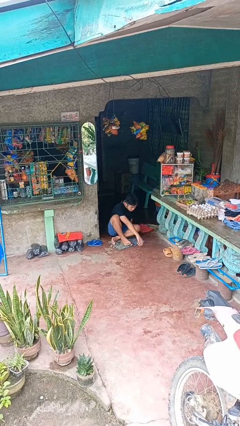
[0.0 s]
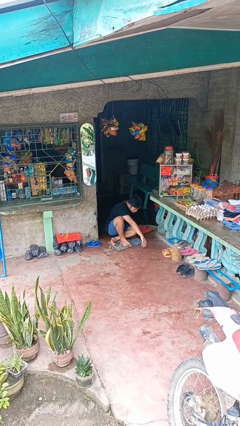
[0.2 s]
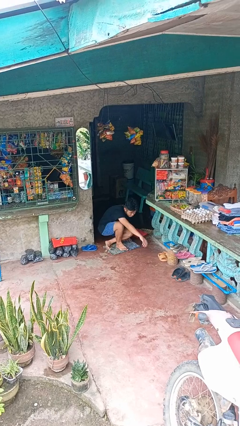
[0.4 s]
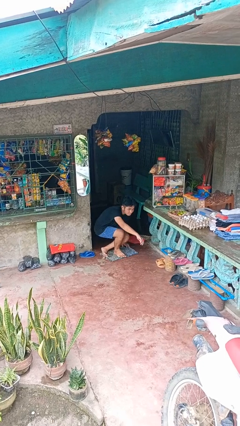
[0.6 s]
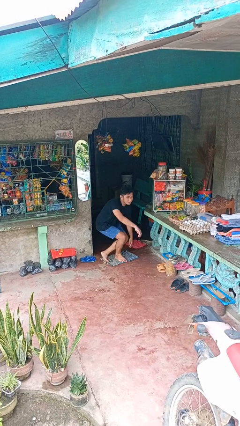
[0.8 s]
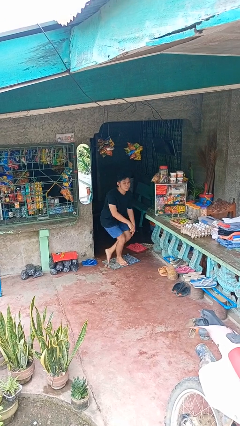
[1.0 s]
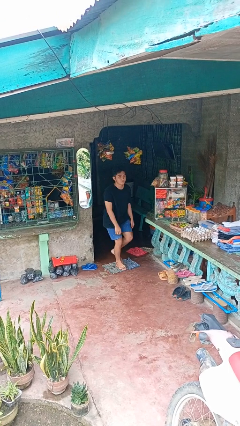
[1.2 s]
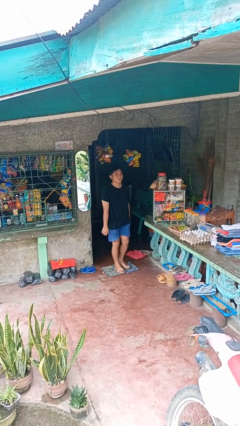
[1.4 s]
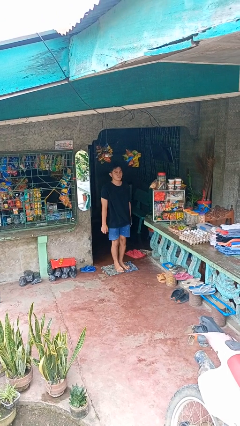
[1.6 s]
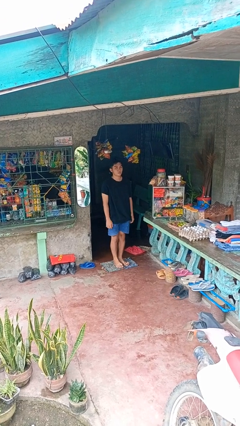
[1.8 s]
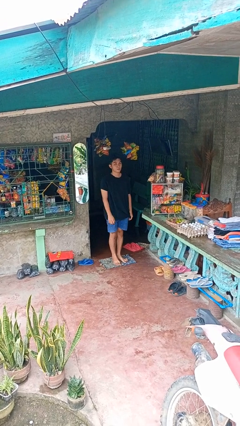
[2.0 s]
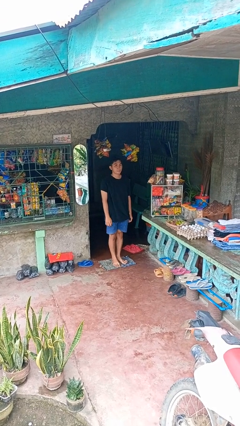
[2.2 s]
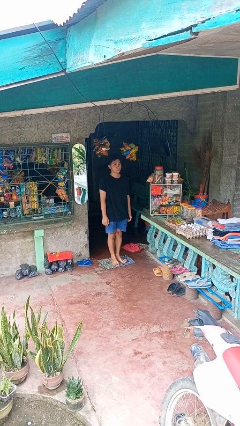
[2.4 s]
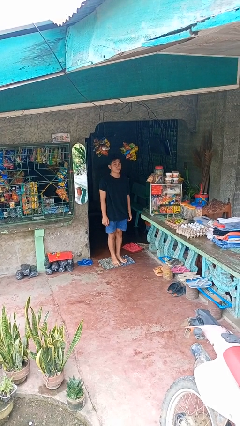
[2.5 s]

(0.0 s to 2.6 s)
person stands up from floor

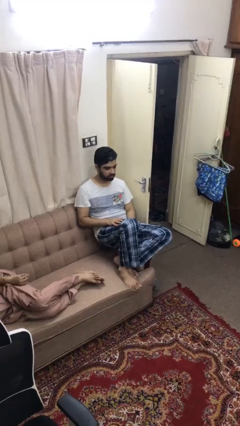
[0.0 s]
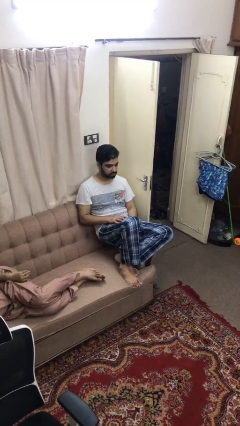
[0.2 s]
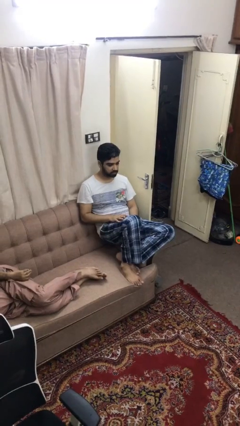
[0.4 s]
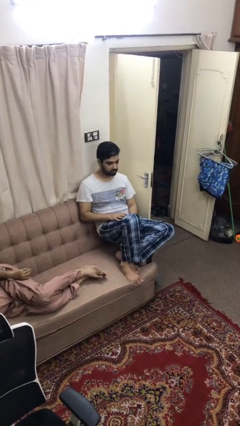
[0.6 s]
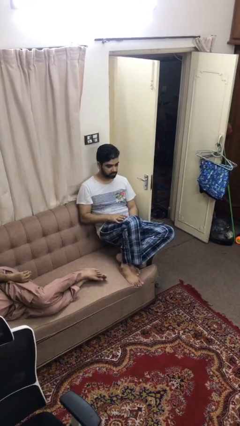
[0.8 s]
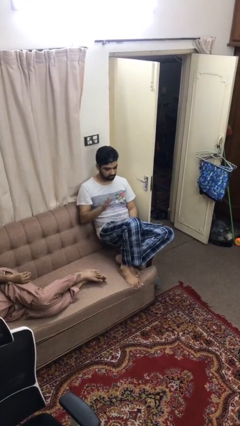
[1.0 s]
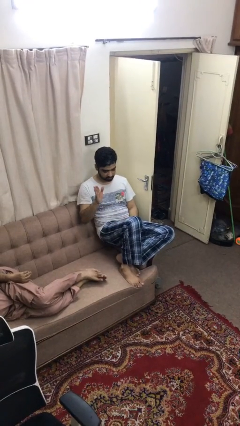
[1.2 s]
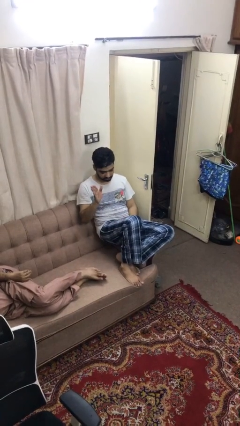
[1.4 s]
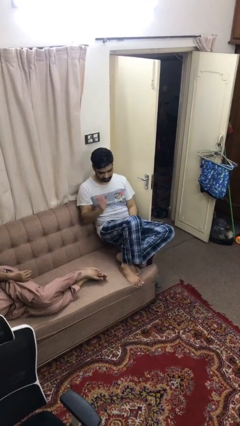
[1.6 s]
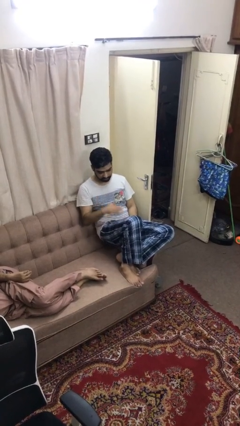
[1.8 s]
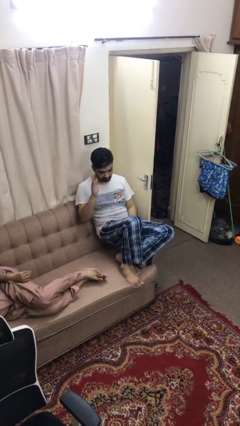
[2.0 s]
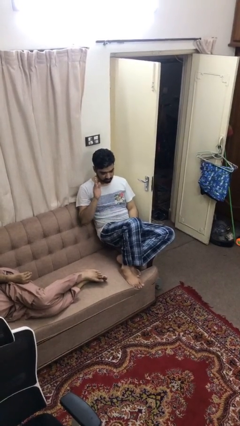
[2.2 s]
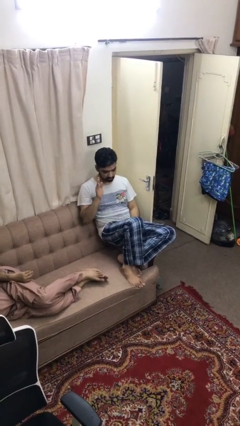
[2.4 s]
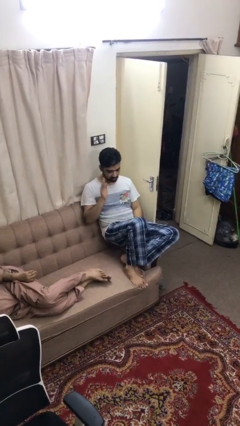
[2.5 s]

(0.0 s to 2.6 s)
person swats bug

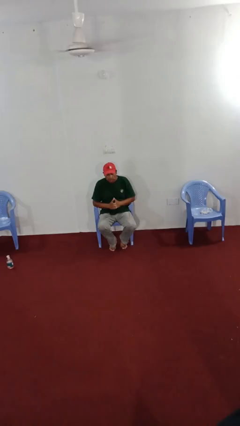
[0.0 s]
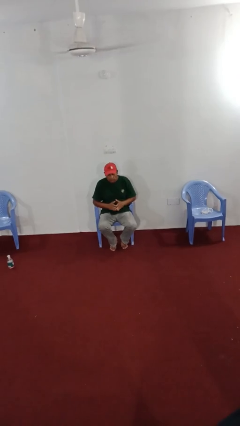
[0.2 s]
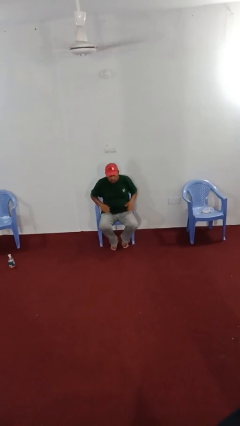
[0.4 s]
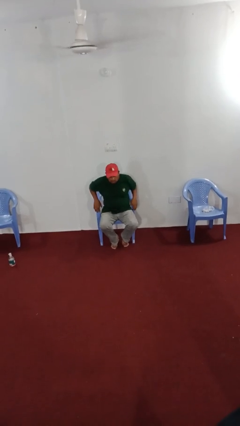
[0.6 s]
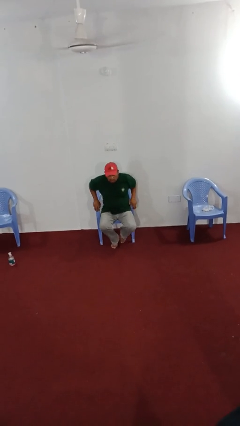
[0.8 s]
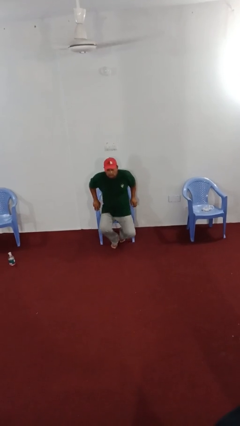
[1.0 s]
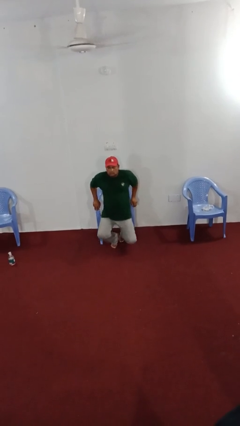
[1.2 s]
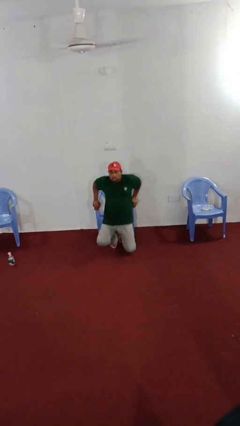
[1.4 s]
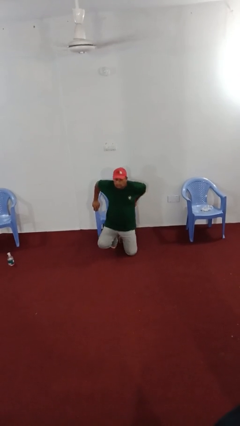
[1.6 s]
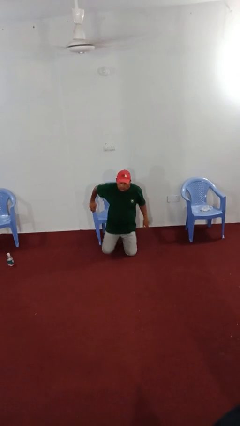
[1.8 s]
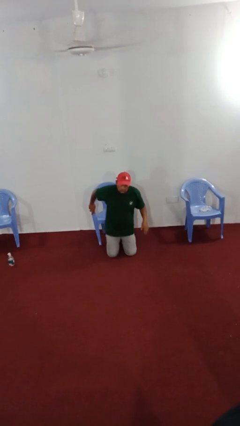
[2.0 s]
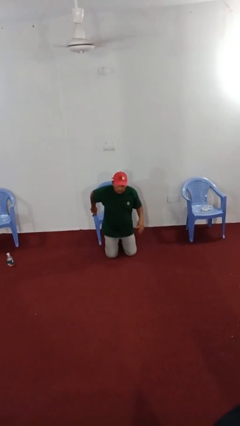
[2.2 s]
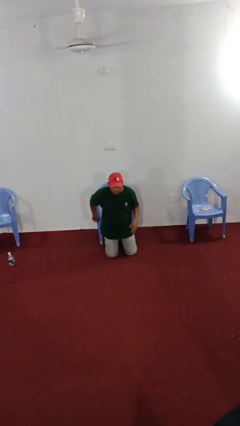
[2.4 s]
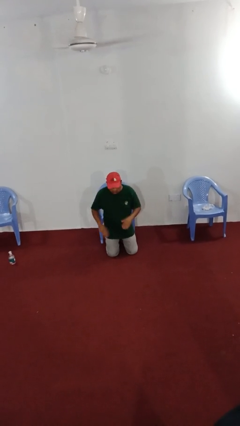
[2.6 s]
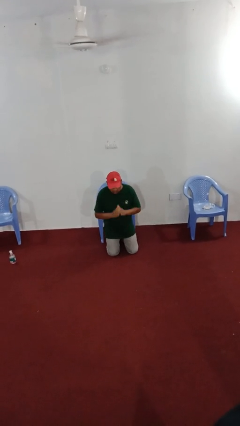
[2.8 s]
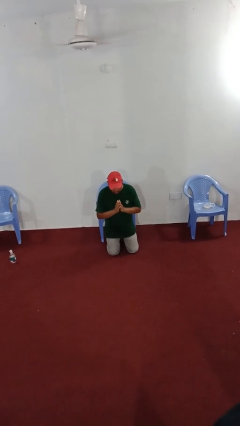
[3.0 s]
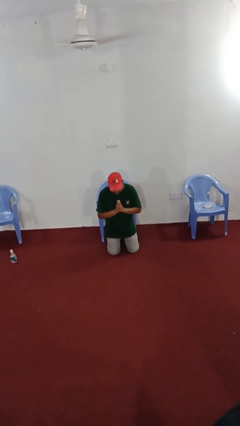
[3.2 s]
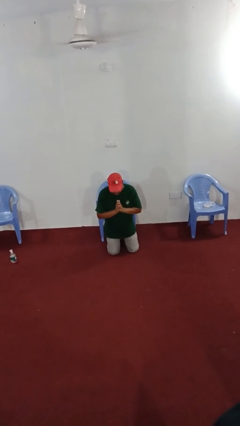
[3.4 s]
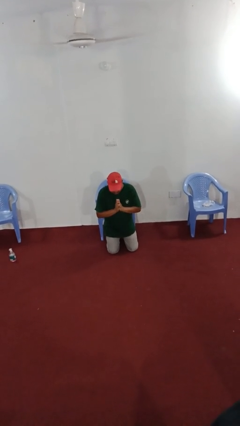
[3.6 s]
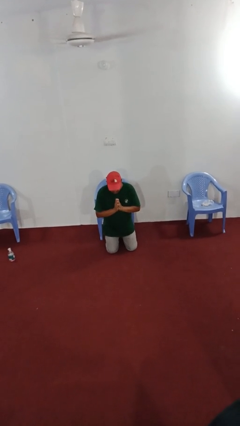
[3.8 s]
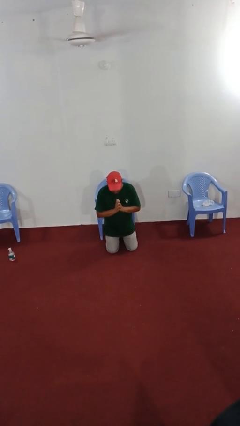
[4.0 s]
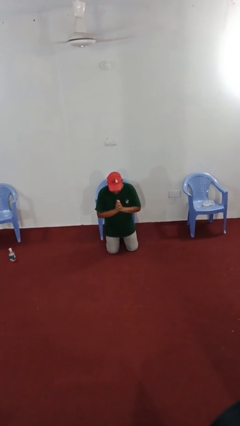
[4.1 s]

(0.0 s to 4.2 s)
person prays

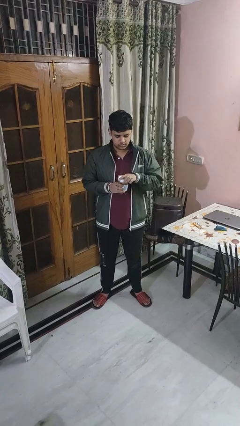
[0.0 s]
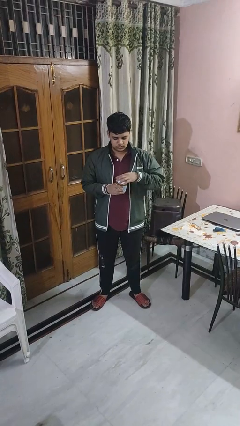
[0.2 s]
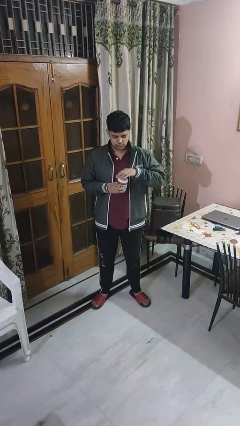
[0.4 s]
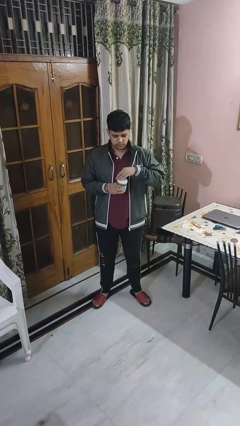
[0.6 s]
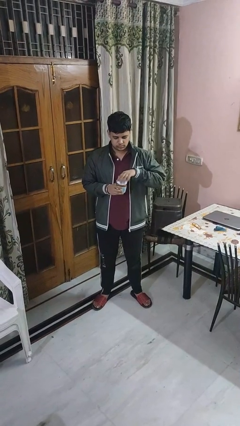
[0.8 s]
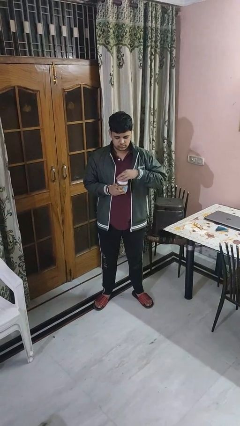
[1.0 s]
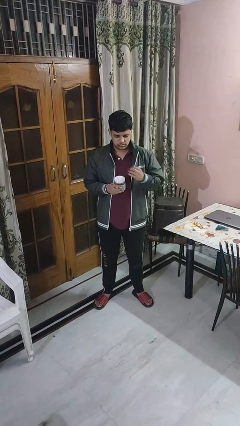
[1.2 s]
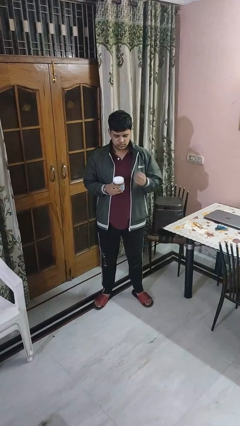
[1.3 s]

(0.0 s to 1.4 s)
person closes jar

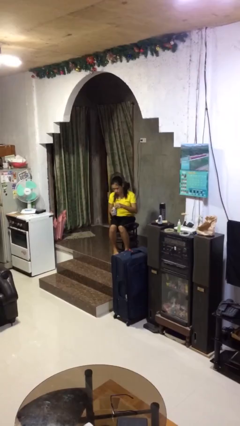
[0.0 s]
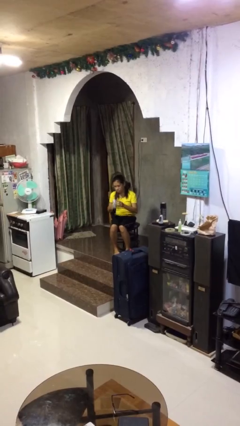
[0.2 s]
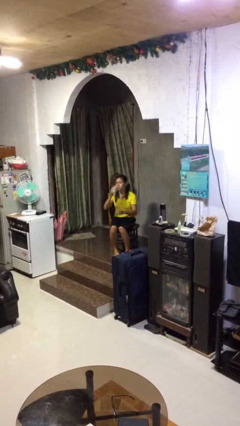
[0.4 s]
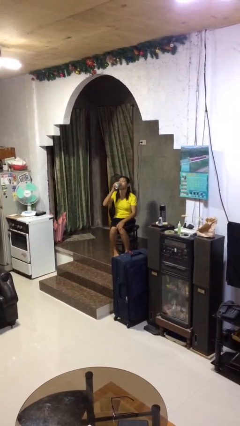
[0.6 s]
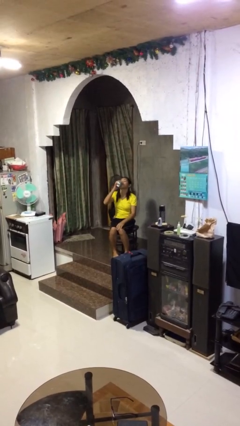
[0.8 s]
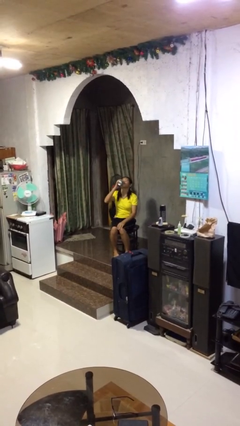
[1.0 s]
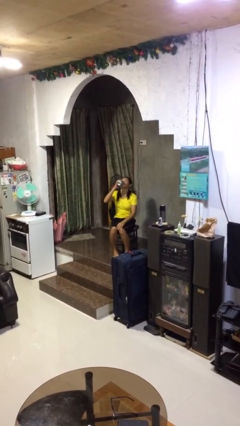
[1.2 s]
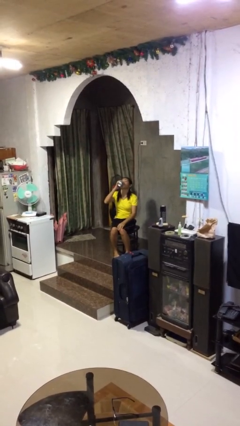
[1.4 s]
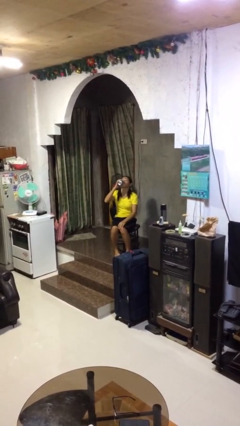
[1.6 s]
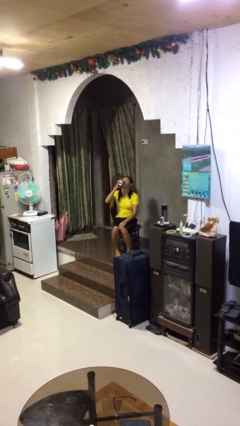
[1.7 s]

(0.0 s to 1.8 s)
person drinks from beverage can

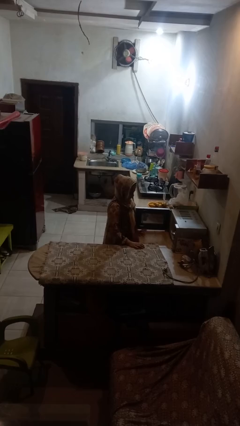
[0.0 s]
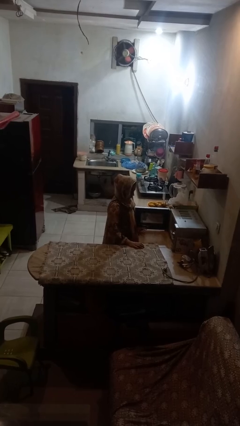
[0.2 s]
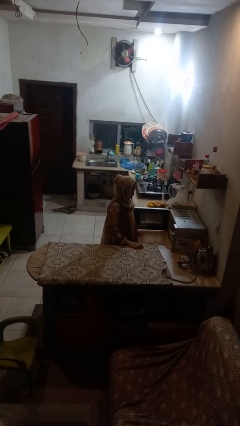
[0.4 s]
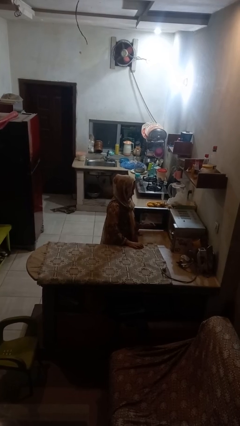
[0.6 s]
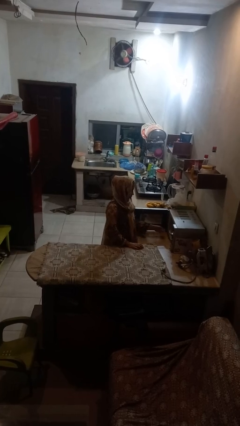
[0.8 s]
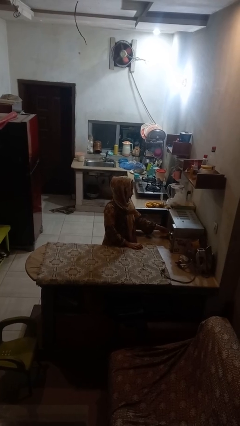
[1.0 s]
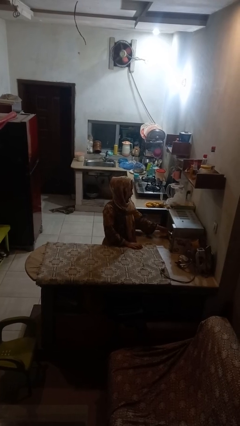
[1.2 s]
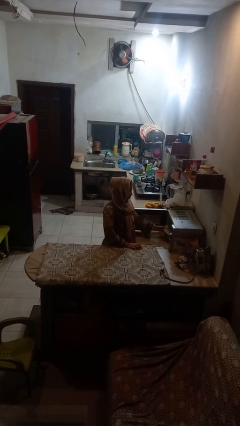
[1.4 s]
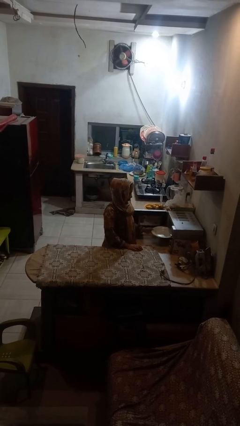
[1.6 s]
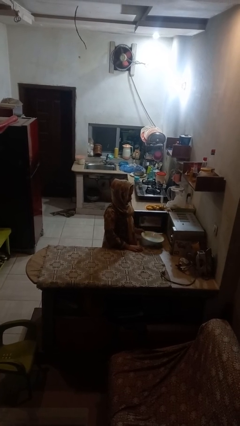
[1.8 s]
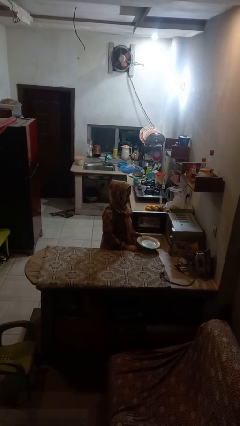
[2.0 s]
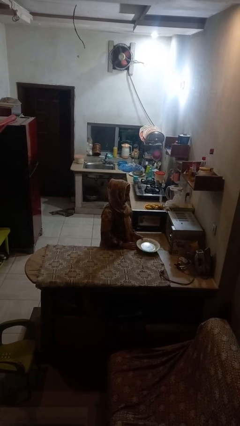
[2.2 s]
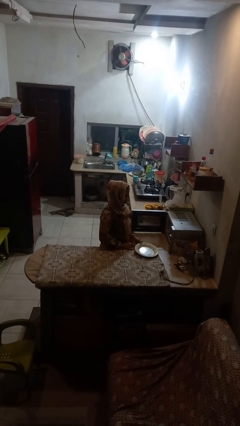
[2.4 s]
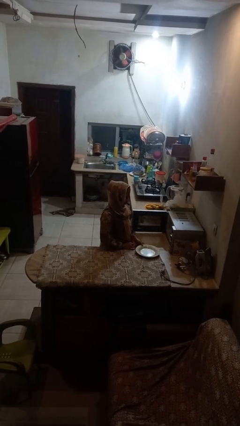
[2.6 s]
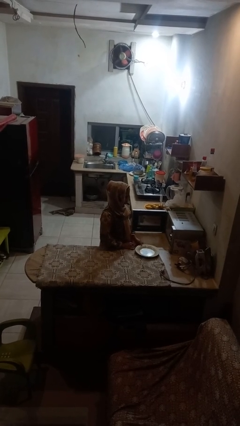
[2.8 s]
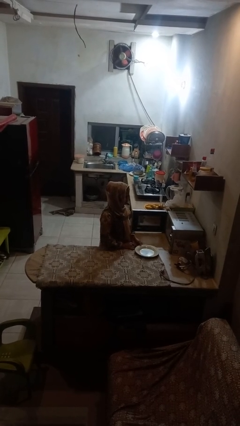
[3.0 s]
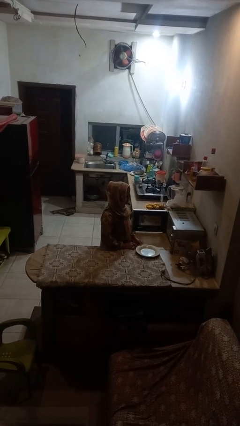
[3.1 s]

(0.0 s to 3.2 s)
person takes object from microwave

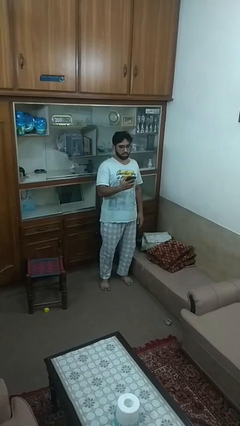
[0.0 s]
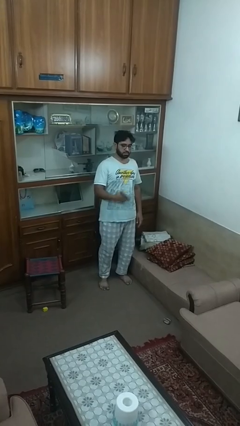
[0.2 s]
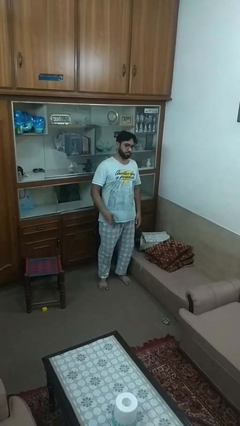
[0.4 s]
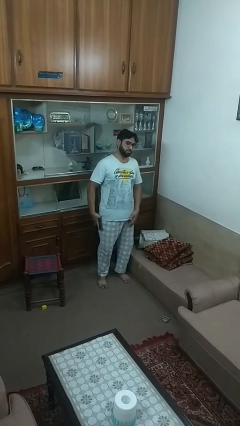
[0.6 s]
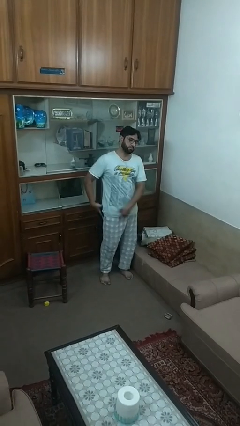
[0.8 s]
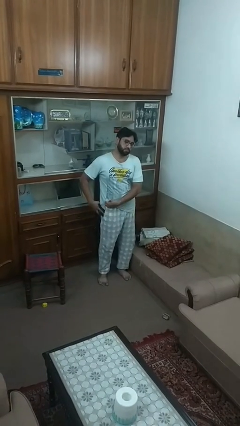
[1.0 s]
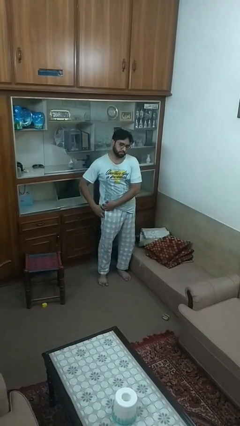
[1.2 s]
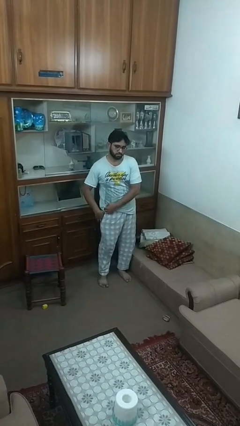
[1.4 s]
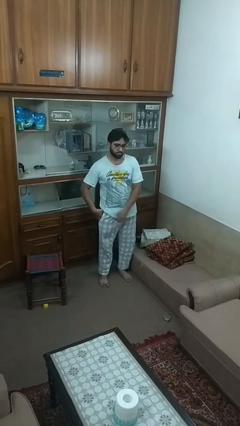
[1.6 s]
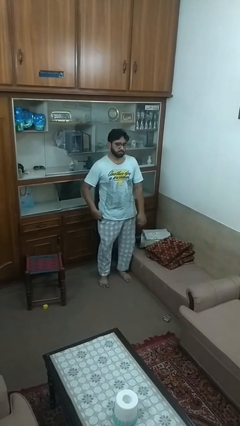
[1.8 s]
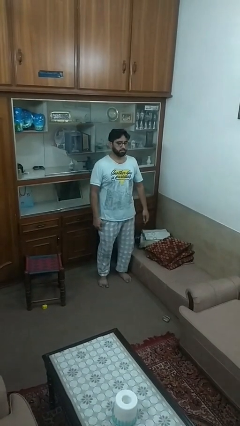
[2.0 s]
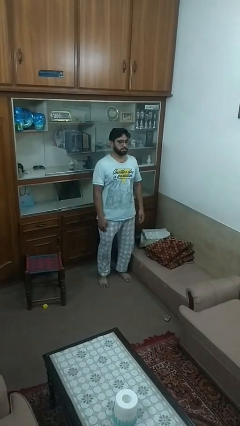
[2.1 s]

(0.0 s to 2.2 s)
person puts phone into pocket
